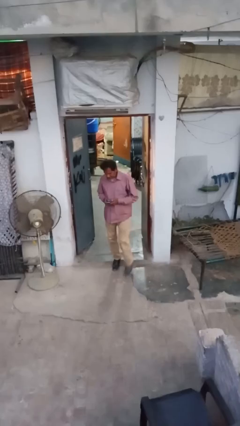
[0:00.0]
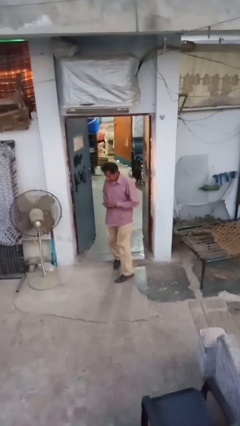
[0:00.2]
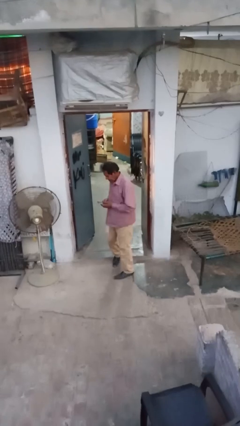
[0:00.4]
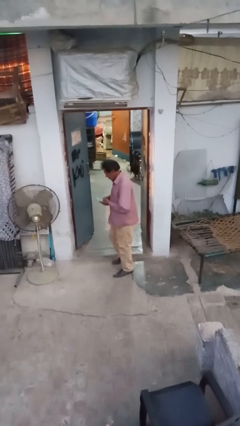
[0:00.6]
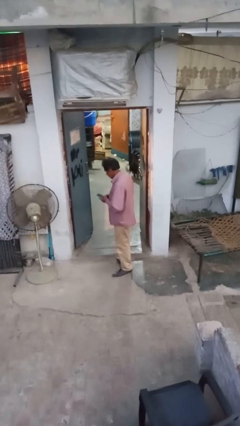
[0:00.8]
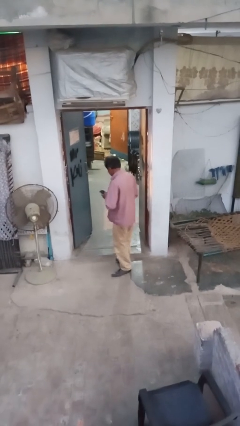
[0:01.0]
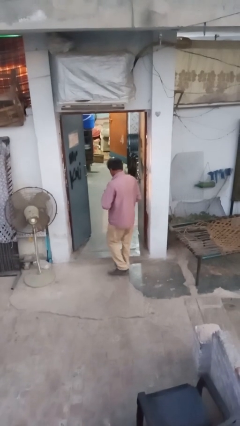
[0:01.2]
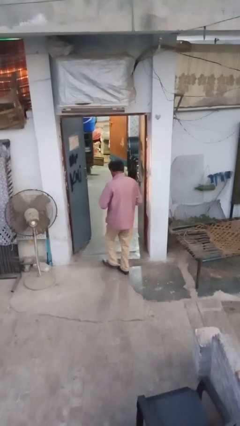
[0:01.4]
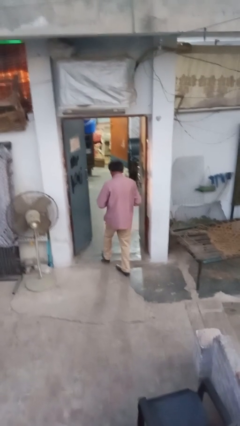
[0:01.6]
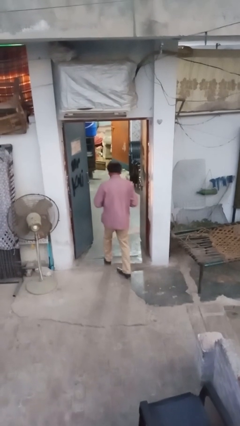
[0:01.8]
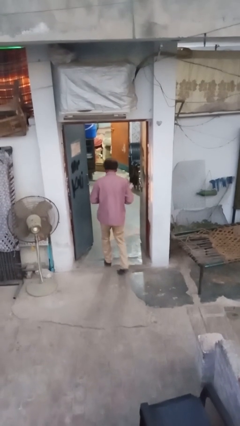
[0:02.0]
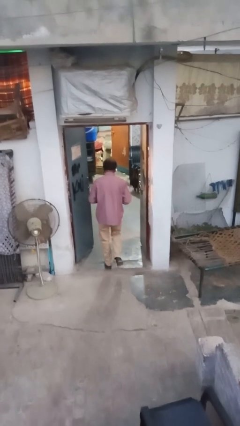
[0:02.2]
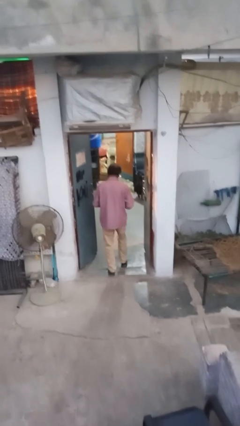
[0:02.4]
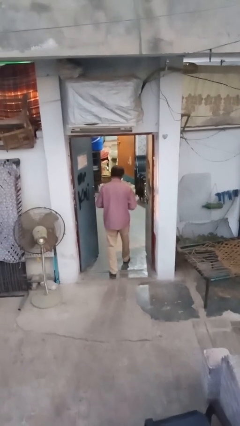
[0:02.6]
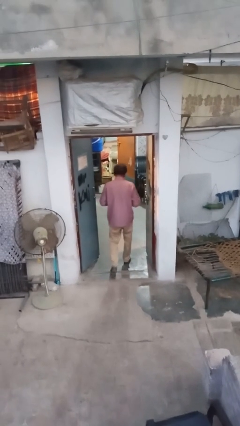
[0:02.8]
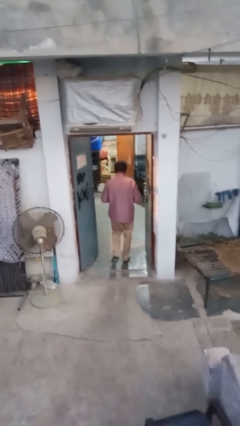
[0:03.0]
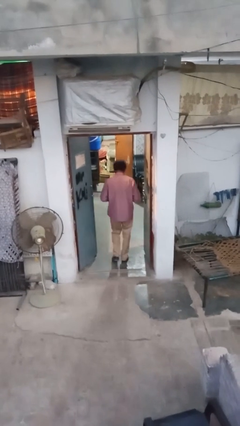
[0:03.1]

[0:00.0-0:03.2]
person exits scene through structure

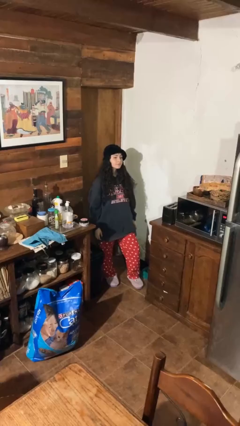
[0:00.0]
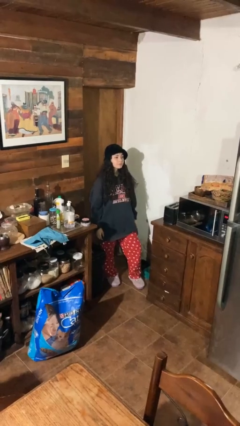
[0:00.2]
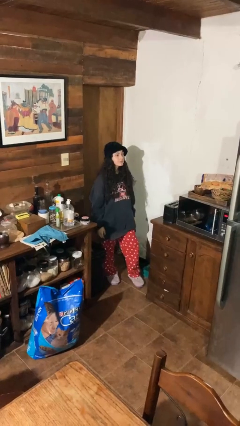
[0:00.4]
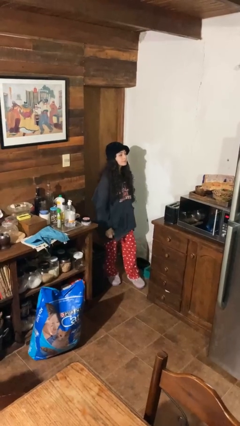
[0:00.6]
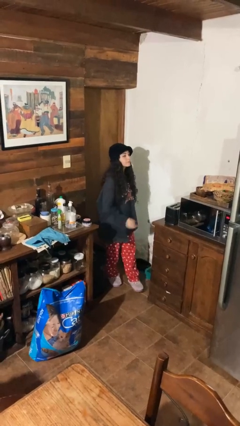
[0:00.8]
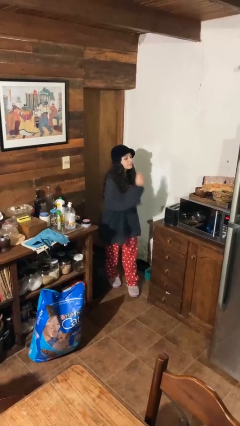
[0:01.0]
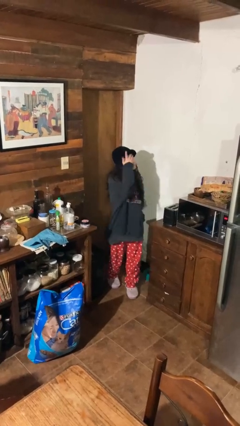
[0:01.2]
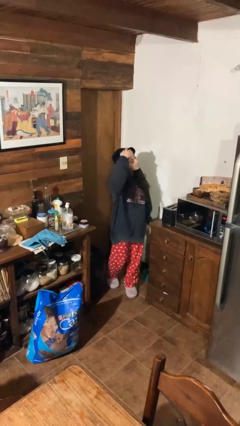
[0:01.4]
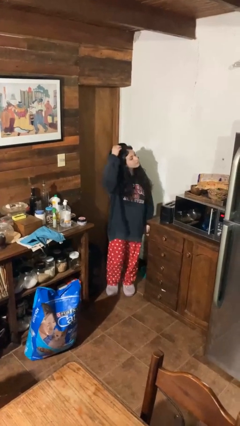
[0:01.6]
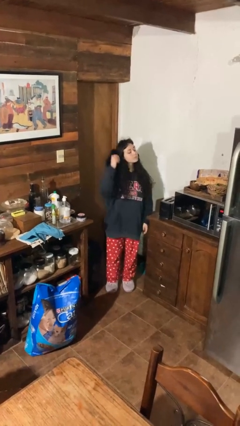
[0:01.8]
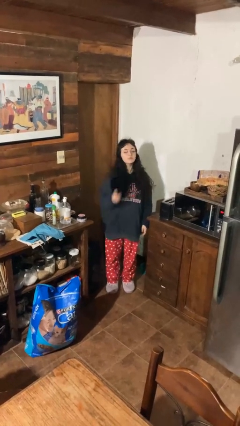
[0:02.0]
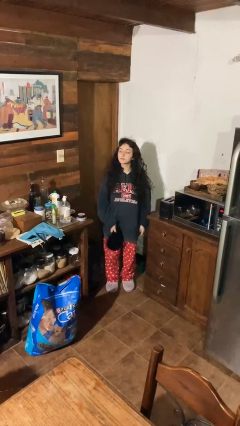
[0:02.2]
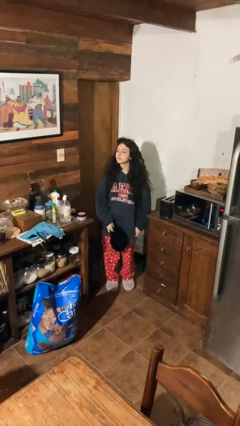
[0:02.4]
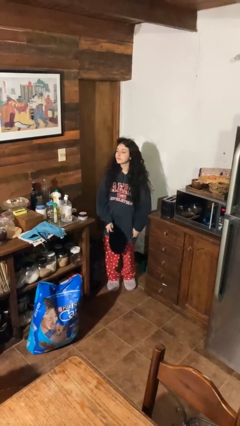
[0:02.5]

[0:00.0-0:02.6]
person takes off hat

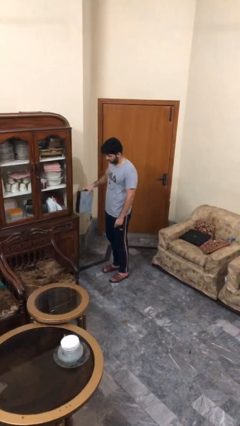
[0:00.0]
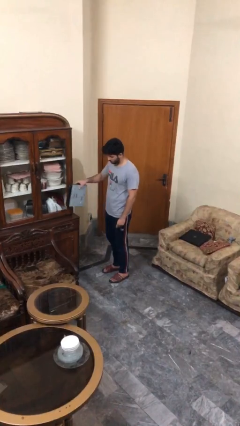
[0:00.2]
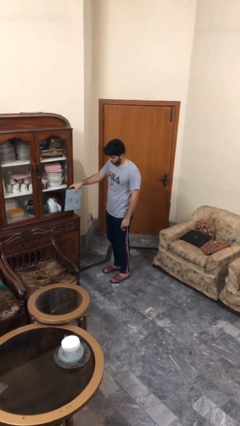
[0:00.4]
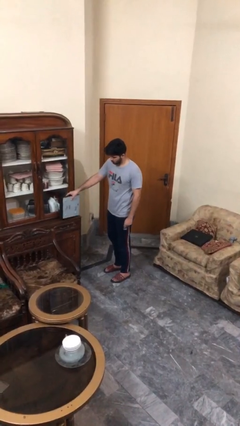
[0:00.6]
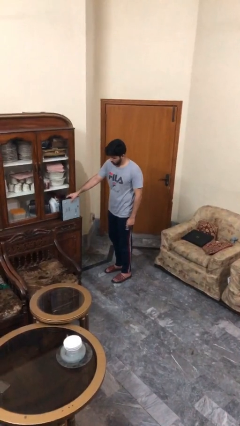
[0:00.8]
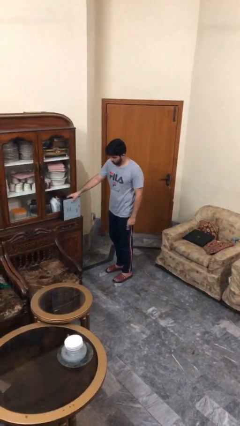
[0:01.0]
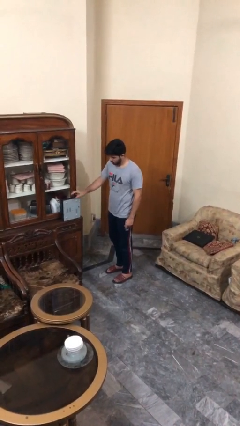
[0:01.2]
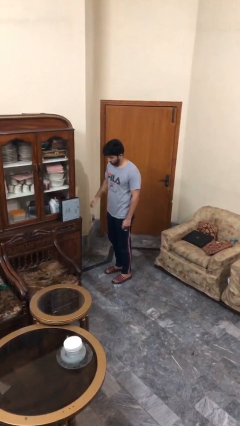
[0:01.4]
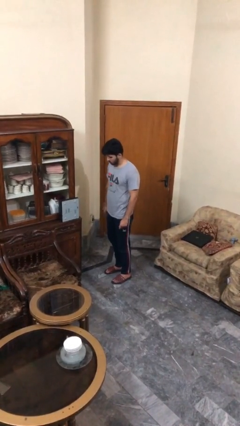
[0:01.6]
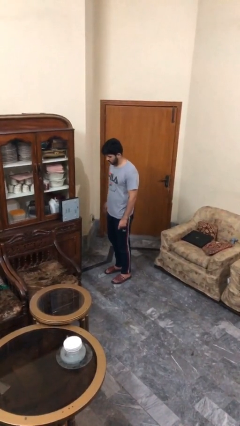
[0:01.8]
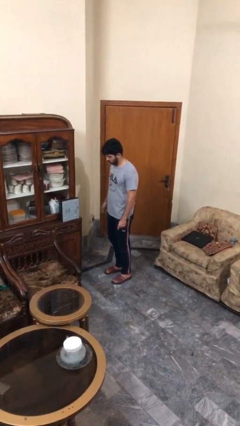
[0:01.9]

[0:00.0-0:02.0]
person puts down object on countertop

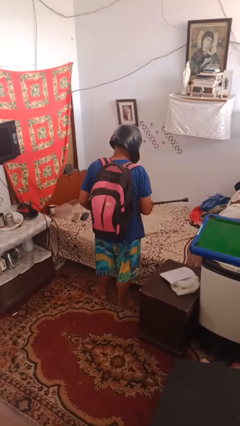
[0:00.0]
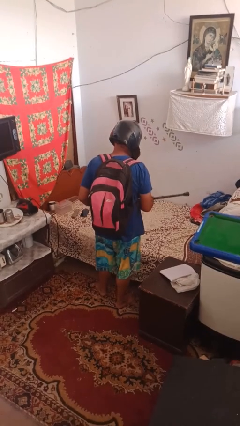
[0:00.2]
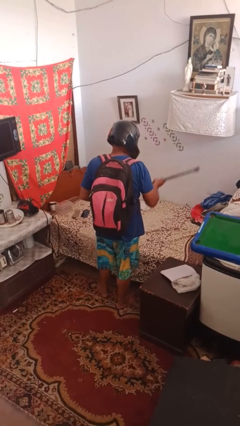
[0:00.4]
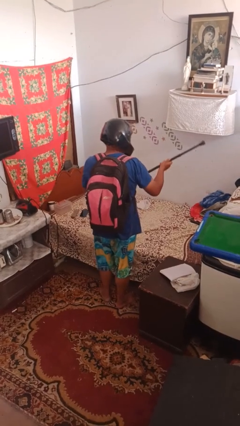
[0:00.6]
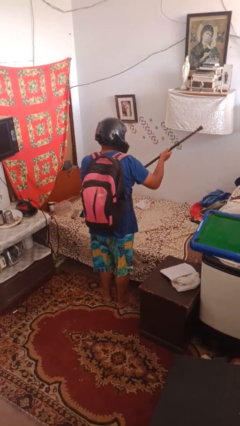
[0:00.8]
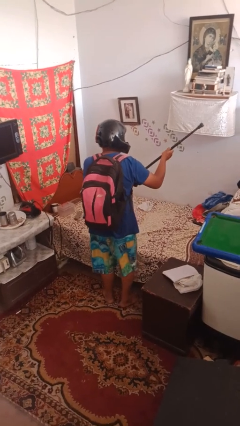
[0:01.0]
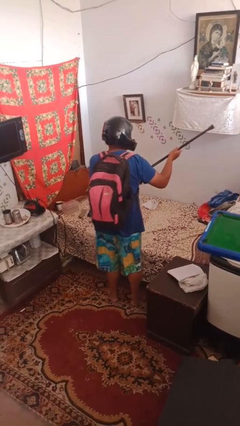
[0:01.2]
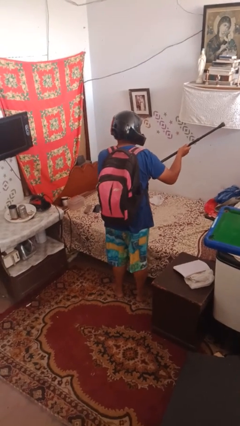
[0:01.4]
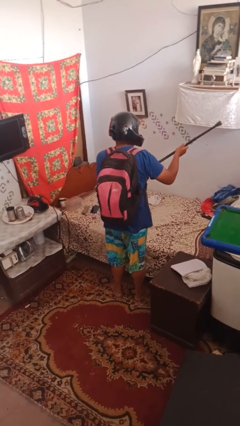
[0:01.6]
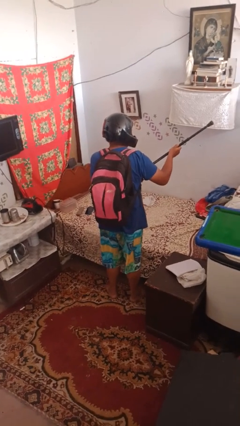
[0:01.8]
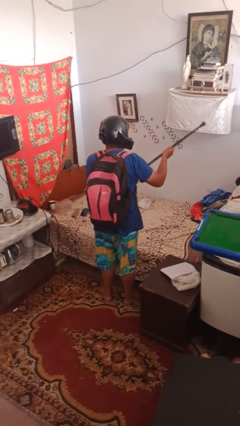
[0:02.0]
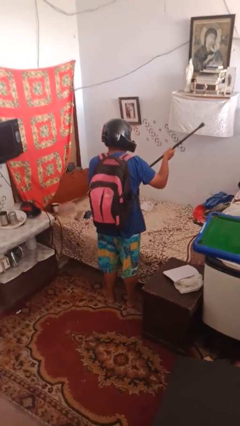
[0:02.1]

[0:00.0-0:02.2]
person swats bug

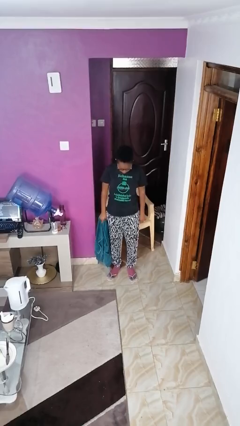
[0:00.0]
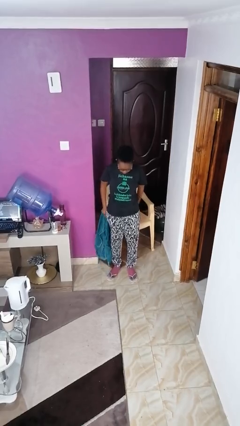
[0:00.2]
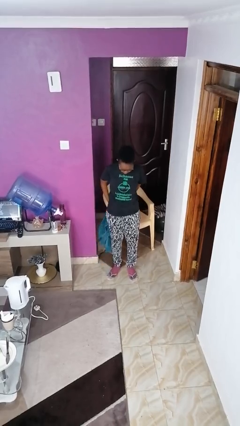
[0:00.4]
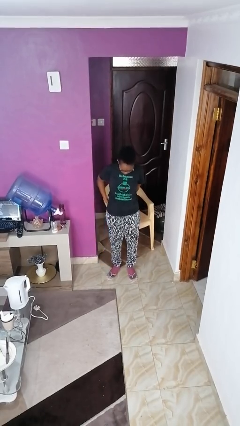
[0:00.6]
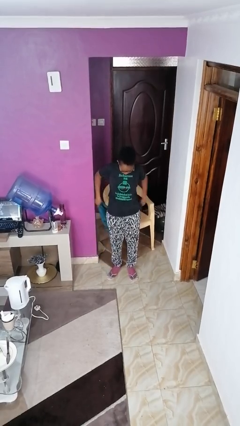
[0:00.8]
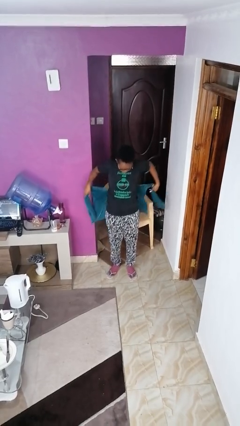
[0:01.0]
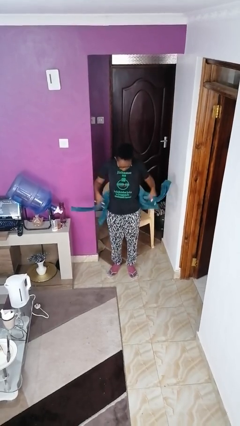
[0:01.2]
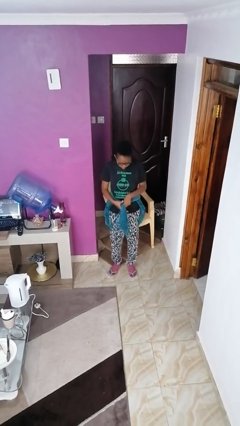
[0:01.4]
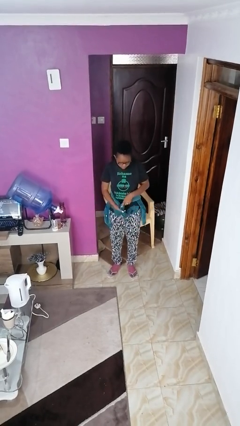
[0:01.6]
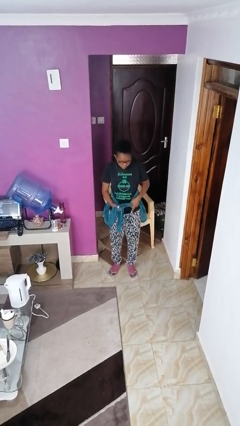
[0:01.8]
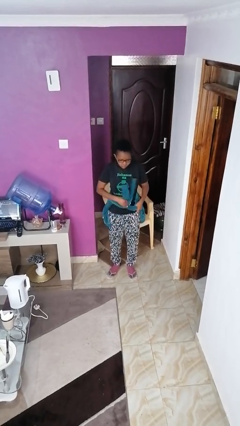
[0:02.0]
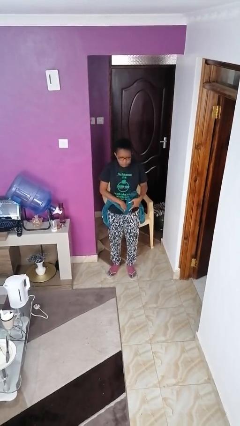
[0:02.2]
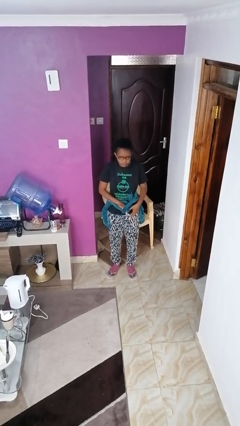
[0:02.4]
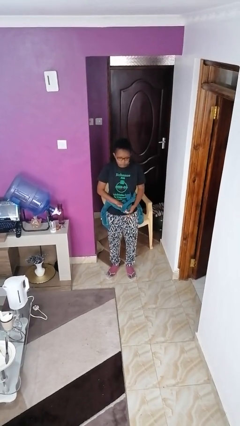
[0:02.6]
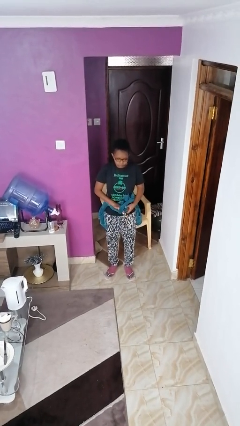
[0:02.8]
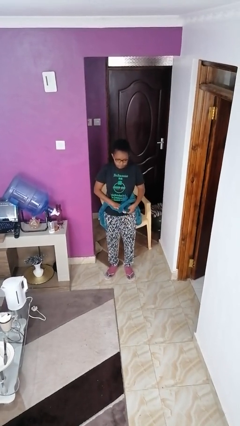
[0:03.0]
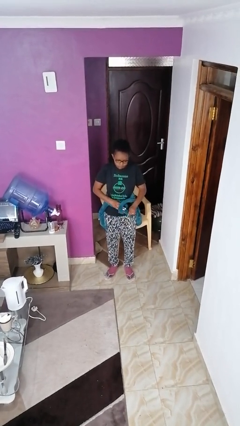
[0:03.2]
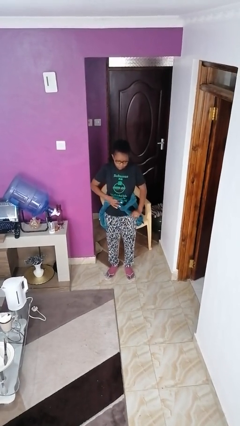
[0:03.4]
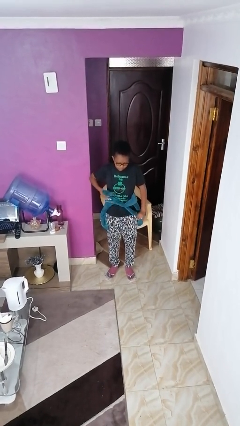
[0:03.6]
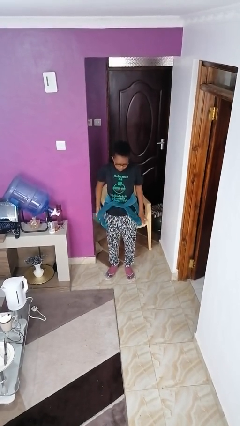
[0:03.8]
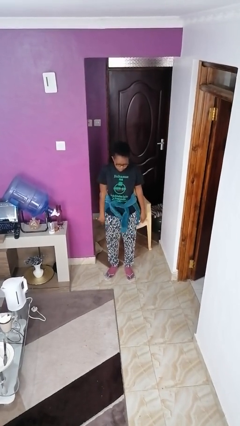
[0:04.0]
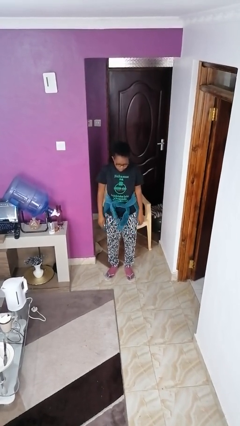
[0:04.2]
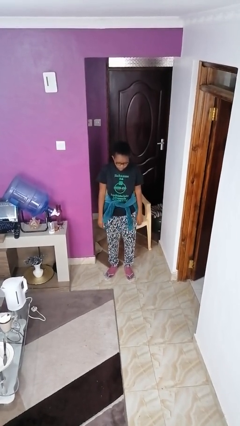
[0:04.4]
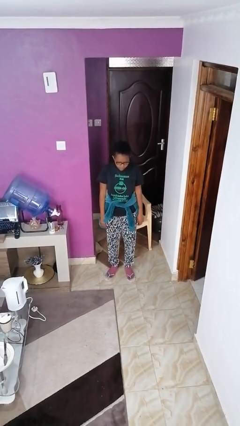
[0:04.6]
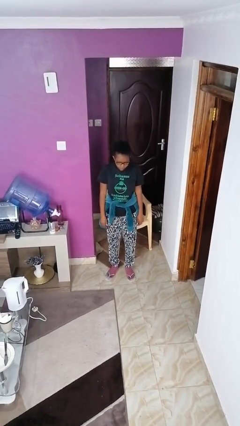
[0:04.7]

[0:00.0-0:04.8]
person ties jacket around waist

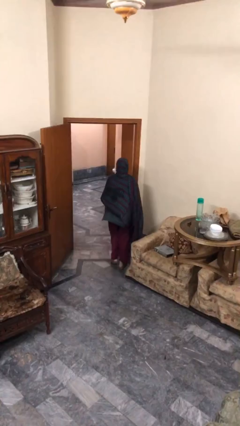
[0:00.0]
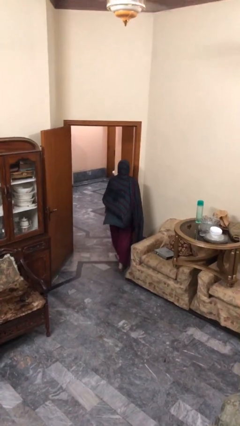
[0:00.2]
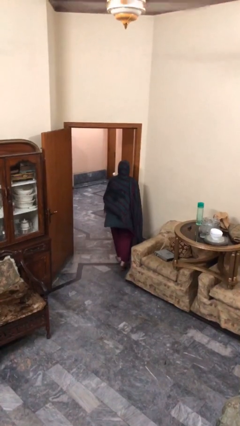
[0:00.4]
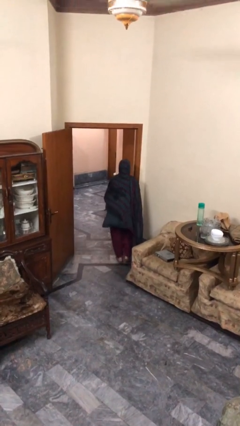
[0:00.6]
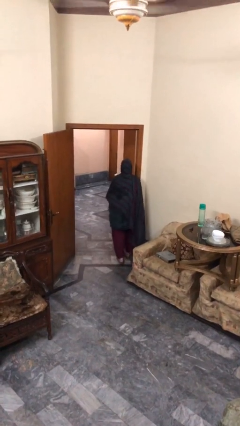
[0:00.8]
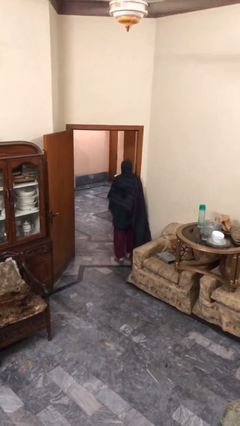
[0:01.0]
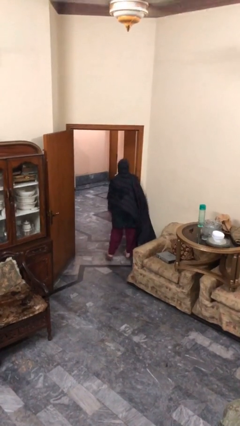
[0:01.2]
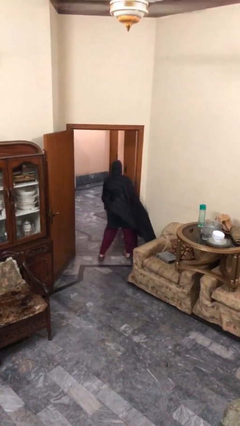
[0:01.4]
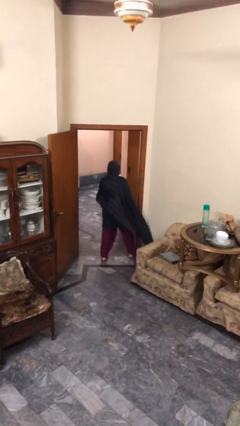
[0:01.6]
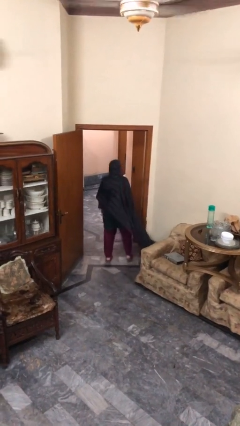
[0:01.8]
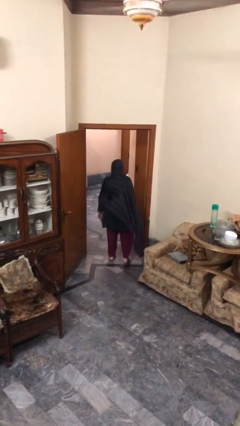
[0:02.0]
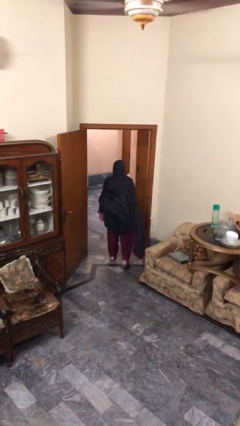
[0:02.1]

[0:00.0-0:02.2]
person bumps into wall

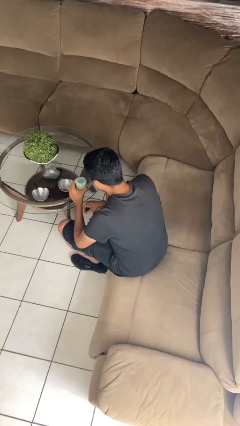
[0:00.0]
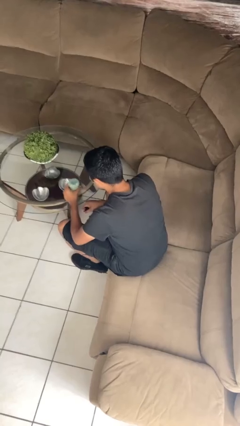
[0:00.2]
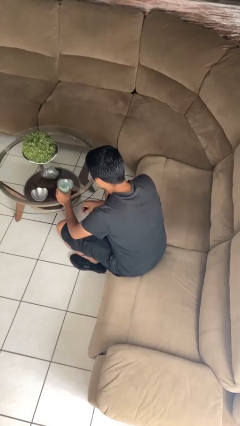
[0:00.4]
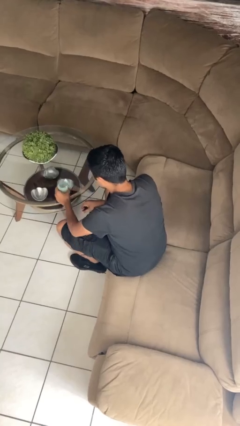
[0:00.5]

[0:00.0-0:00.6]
person extinguishes candle
